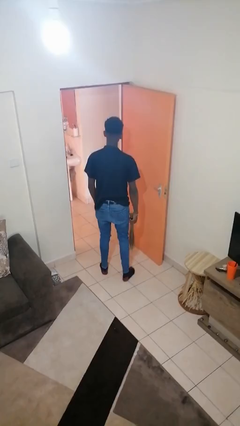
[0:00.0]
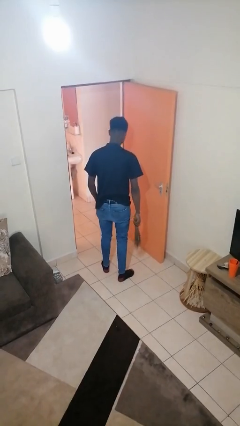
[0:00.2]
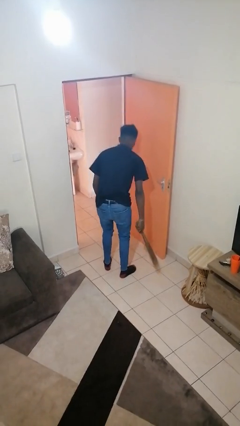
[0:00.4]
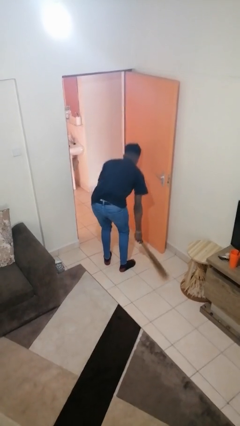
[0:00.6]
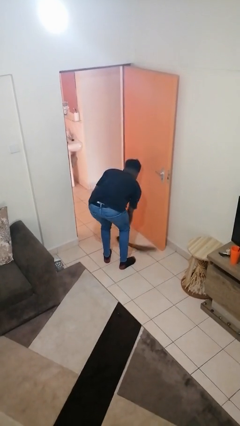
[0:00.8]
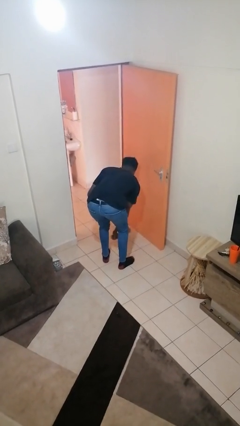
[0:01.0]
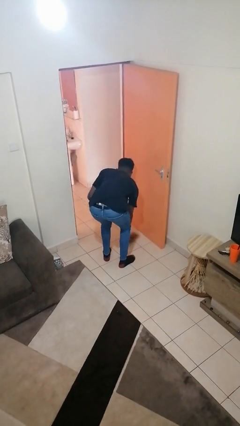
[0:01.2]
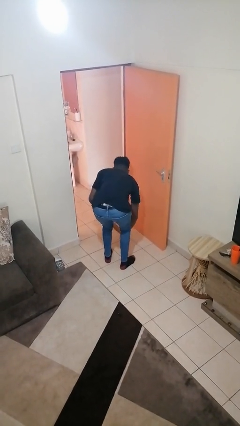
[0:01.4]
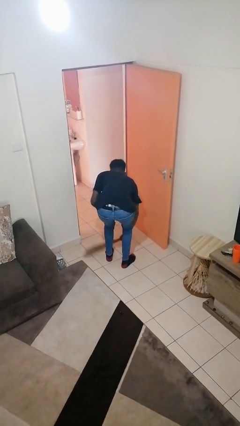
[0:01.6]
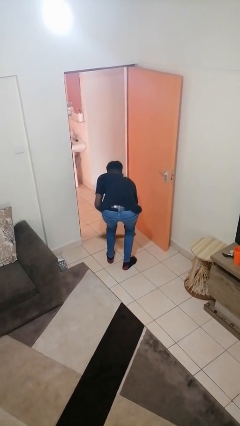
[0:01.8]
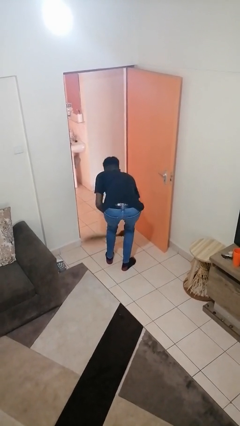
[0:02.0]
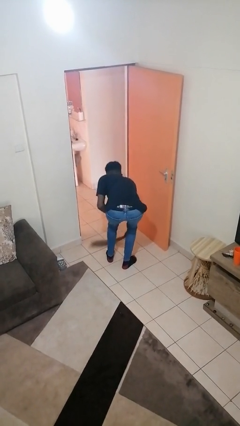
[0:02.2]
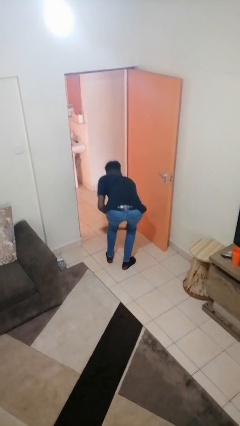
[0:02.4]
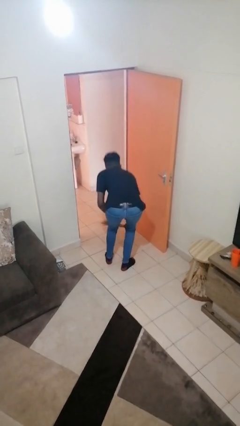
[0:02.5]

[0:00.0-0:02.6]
person sweeps floor

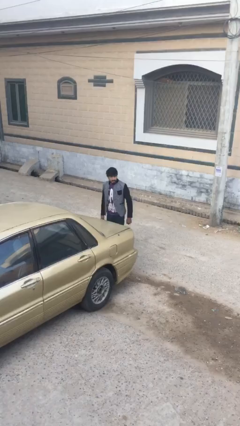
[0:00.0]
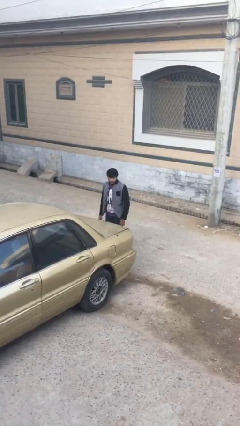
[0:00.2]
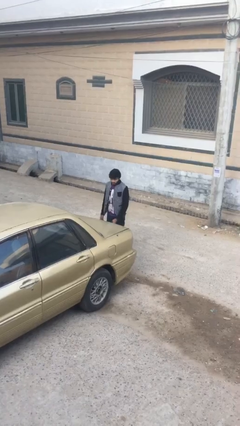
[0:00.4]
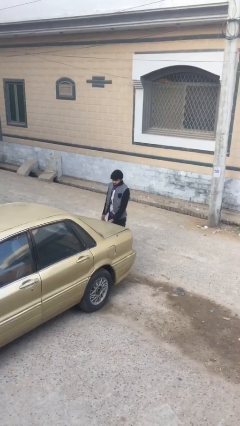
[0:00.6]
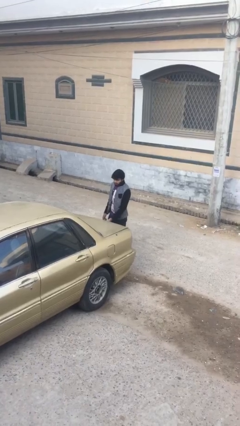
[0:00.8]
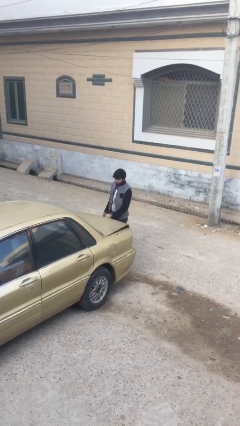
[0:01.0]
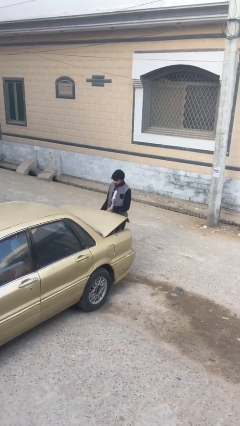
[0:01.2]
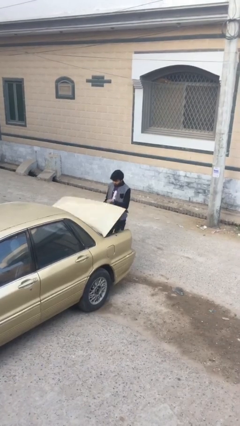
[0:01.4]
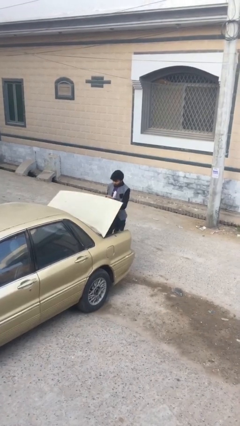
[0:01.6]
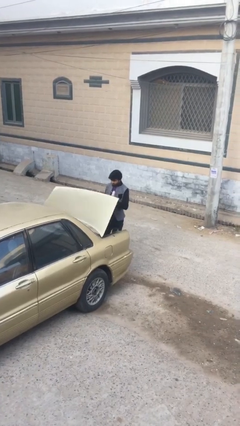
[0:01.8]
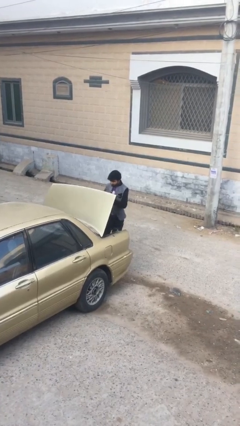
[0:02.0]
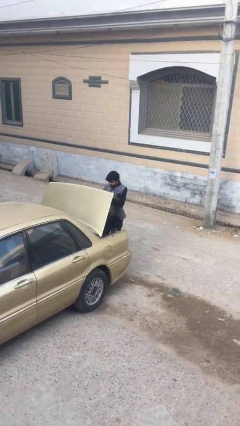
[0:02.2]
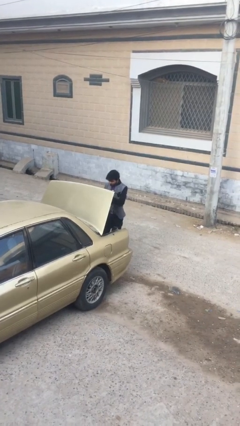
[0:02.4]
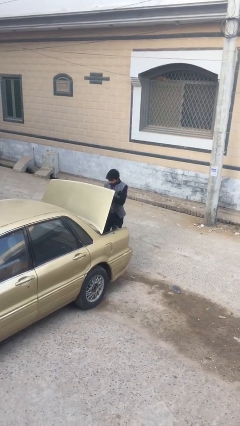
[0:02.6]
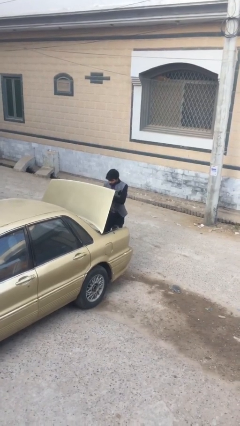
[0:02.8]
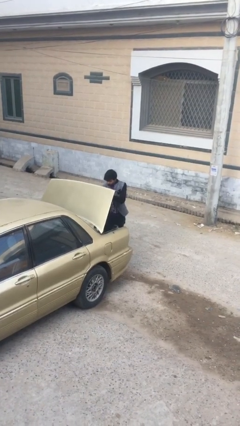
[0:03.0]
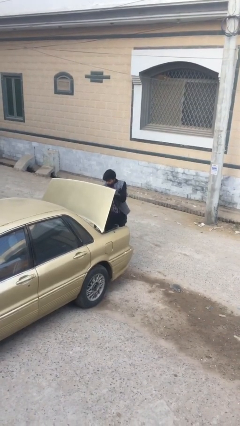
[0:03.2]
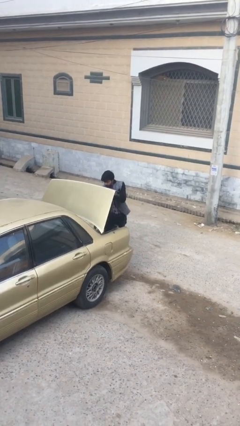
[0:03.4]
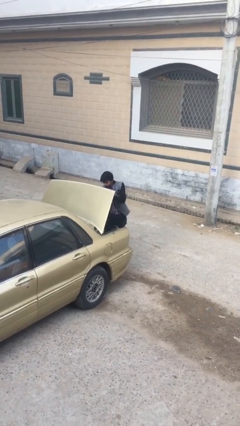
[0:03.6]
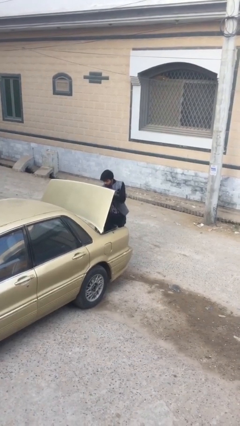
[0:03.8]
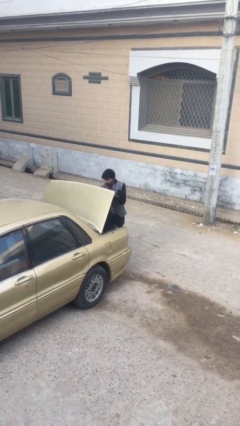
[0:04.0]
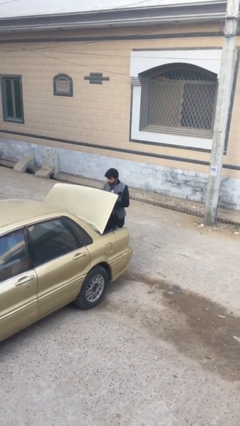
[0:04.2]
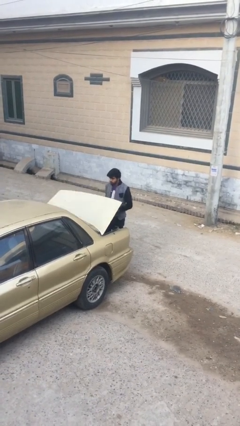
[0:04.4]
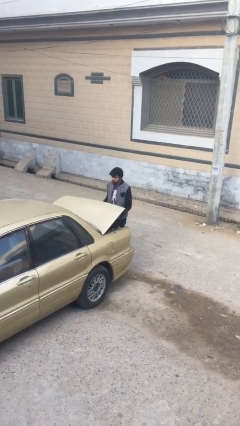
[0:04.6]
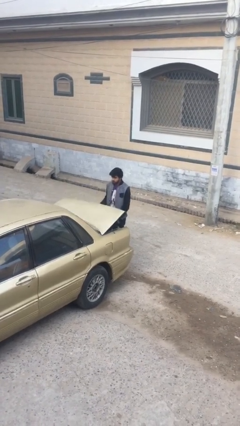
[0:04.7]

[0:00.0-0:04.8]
person opens car trunk

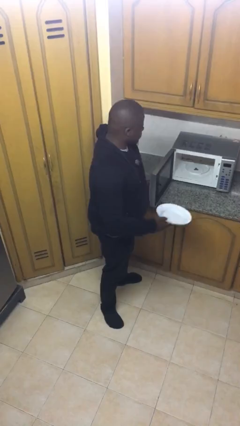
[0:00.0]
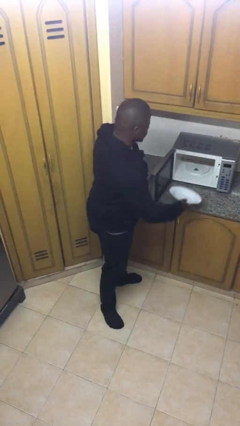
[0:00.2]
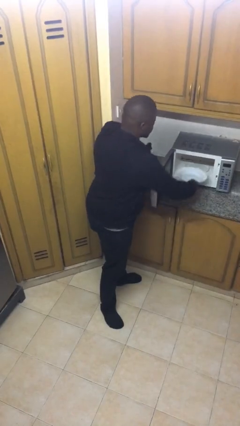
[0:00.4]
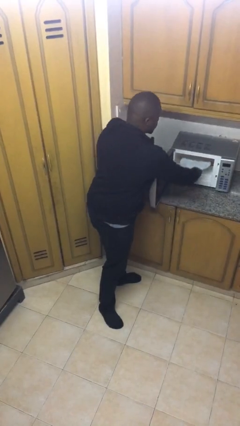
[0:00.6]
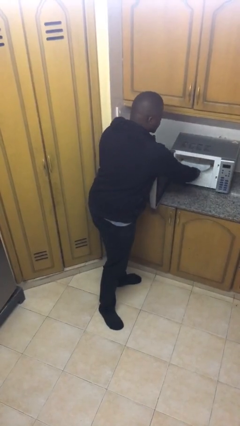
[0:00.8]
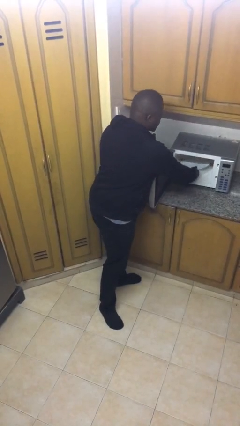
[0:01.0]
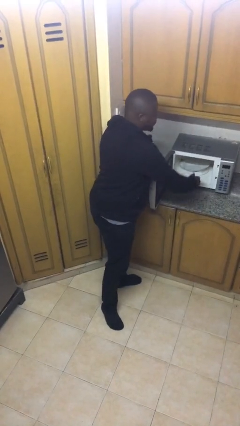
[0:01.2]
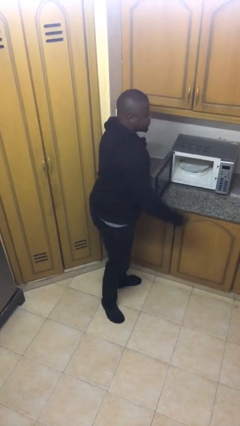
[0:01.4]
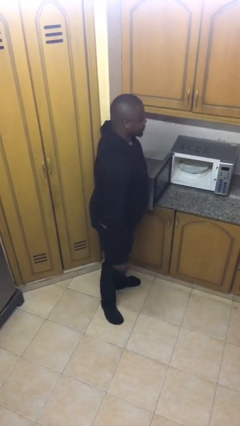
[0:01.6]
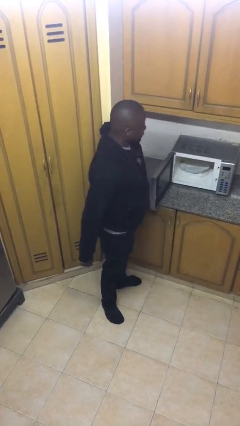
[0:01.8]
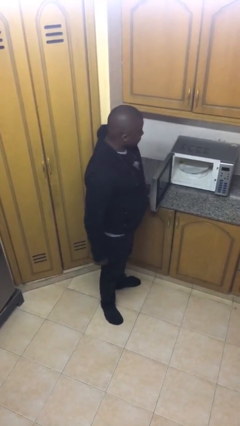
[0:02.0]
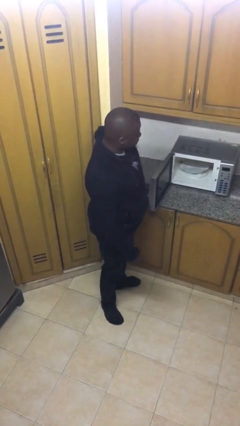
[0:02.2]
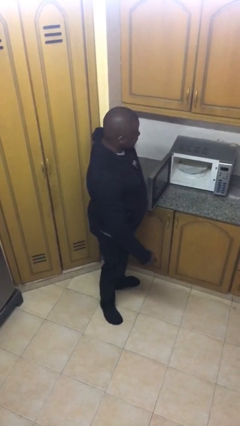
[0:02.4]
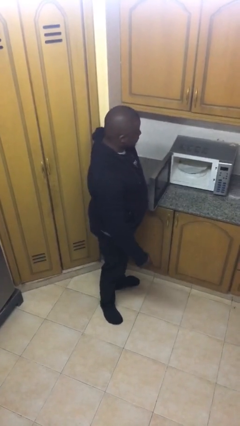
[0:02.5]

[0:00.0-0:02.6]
person puts object into microwave

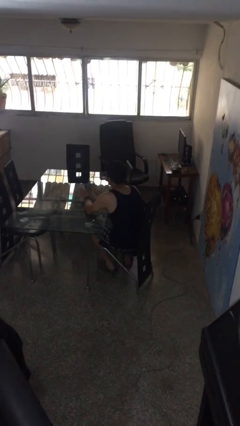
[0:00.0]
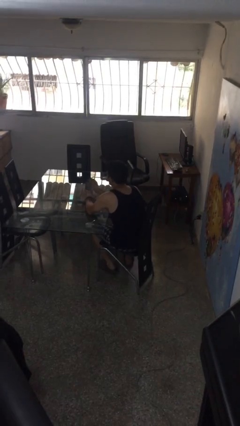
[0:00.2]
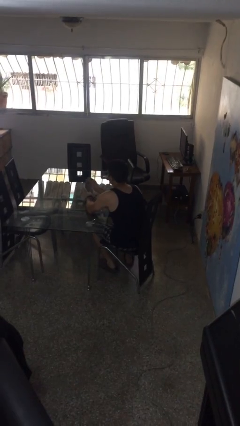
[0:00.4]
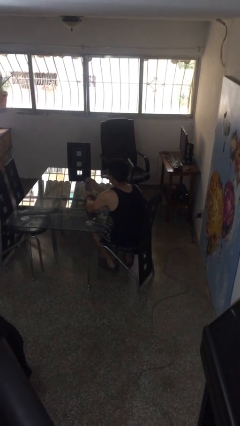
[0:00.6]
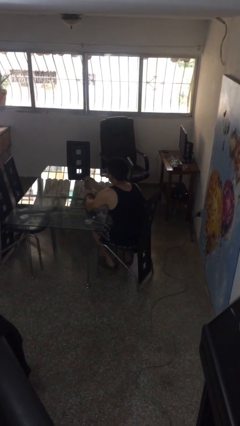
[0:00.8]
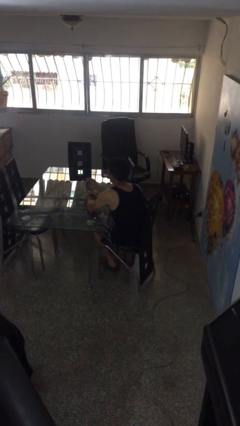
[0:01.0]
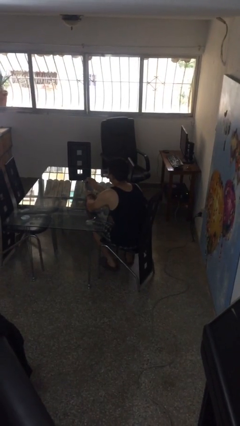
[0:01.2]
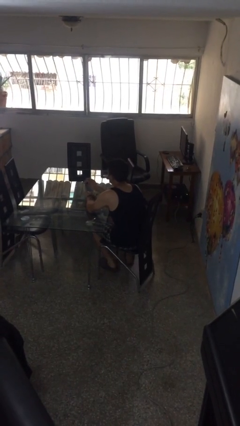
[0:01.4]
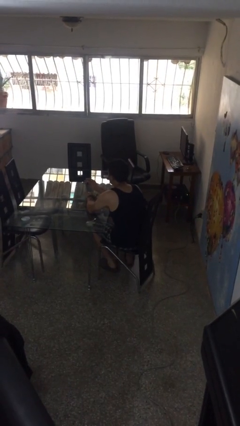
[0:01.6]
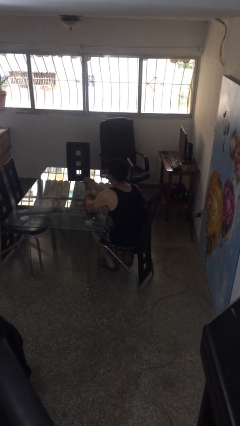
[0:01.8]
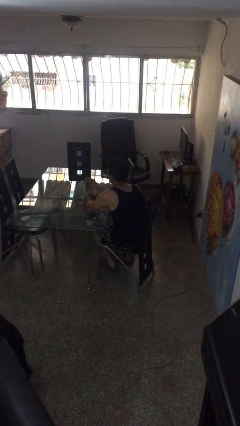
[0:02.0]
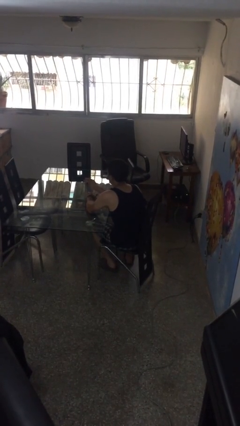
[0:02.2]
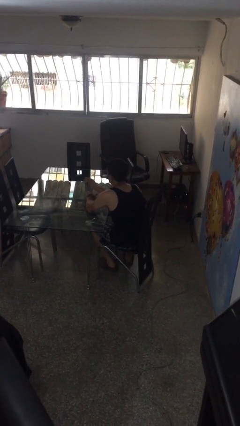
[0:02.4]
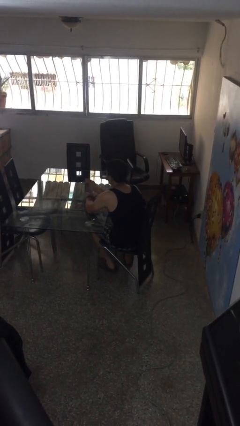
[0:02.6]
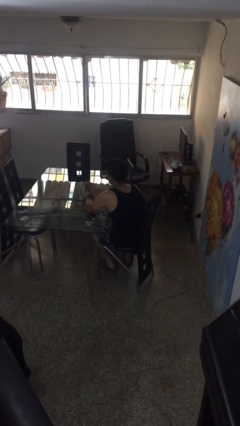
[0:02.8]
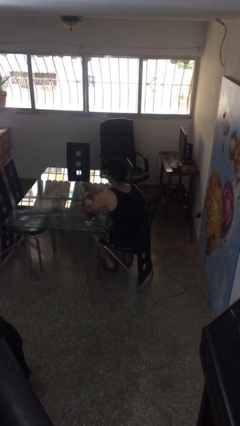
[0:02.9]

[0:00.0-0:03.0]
person clips fingernails

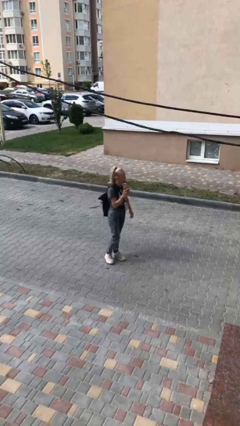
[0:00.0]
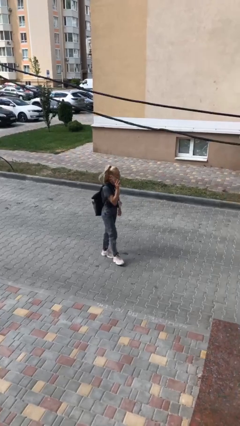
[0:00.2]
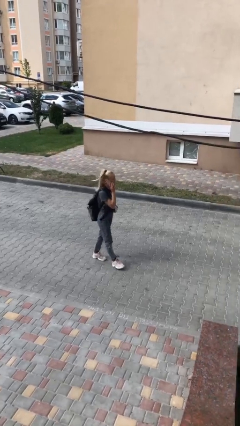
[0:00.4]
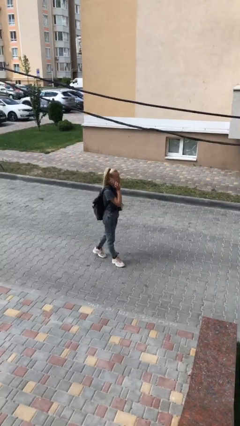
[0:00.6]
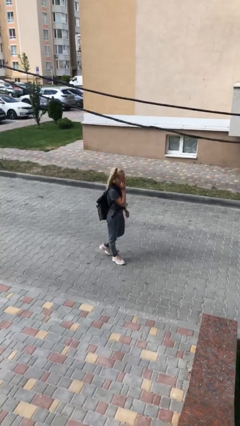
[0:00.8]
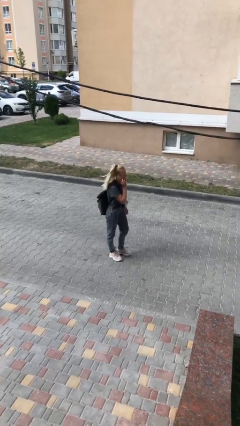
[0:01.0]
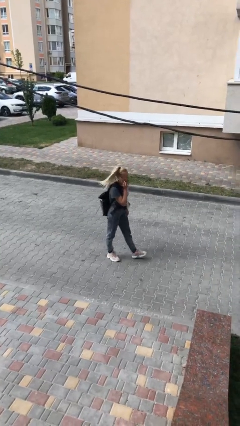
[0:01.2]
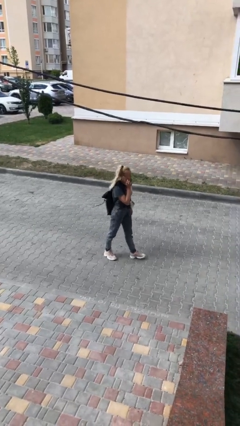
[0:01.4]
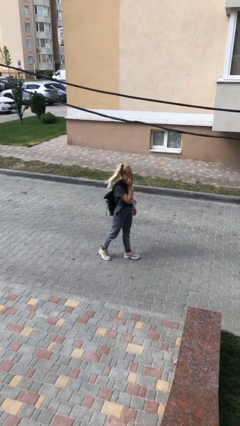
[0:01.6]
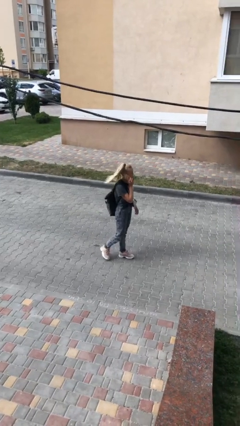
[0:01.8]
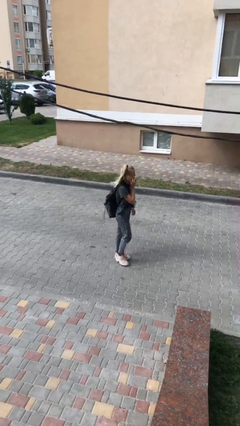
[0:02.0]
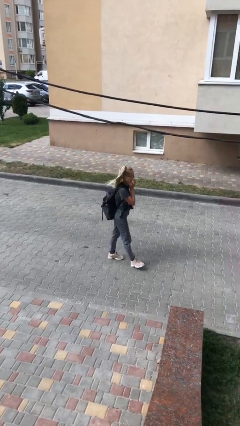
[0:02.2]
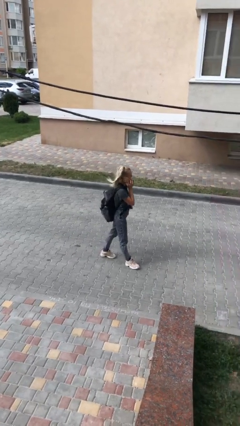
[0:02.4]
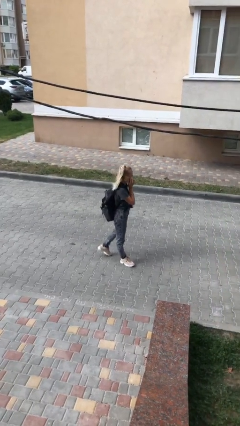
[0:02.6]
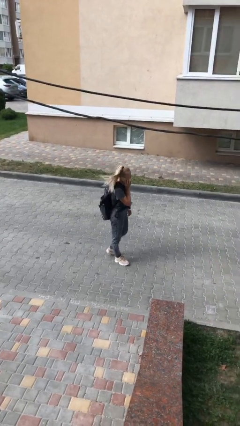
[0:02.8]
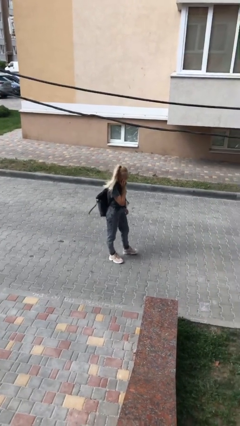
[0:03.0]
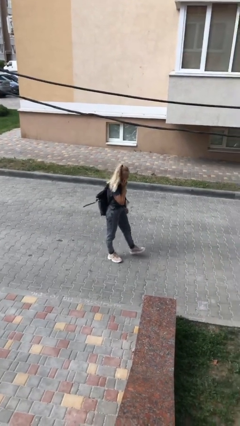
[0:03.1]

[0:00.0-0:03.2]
person talks on phone

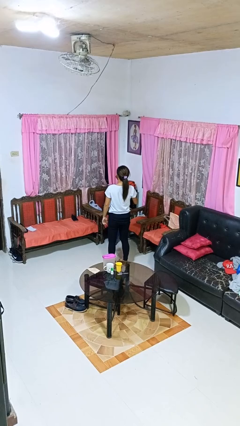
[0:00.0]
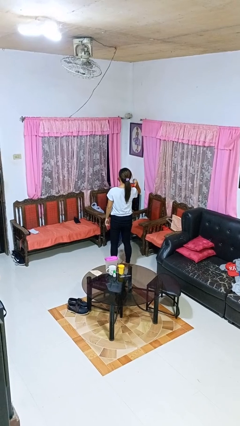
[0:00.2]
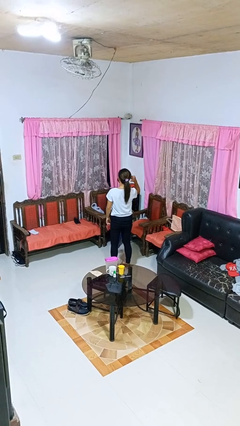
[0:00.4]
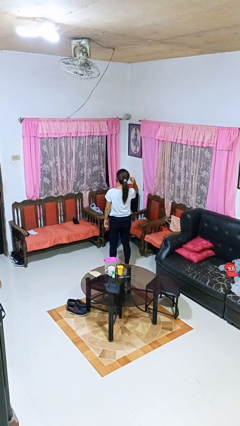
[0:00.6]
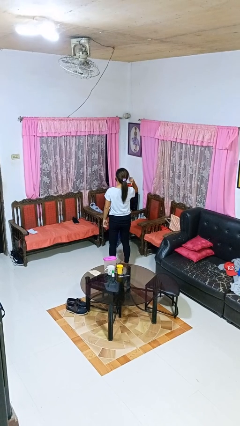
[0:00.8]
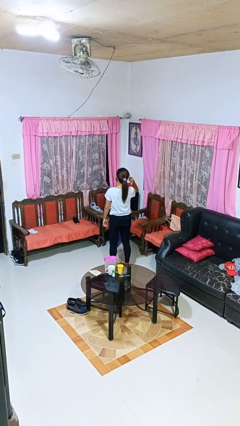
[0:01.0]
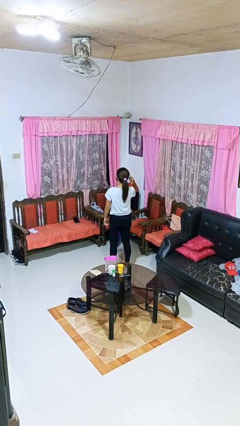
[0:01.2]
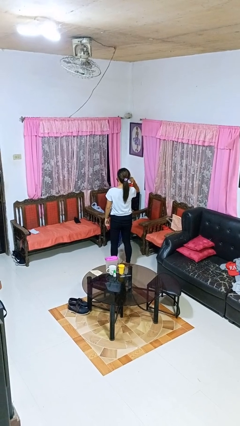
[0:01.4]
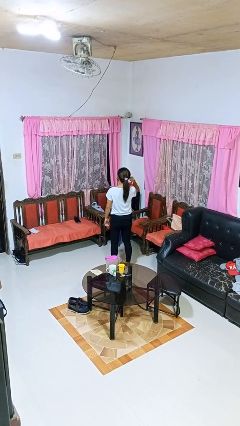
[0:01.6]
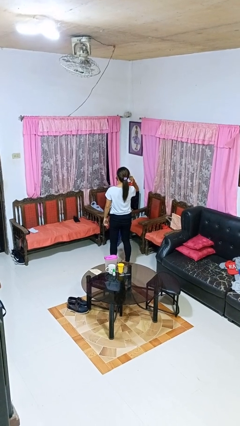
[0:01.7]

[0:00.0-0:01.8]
person gestures behind me
